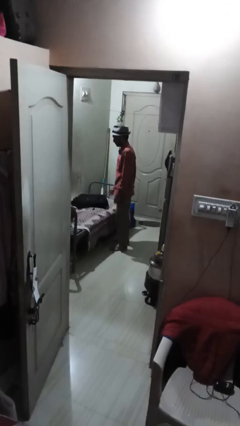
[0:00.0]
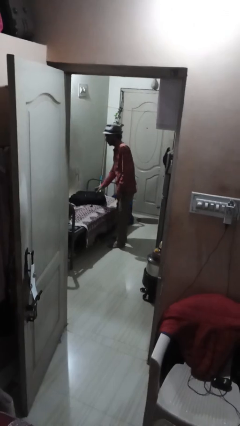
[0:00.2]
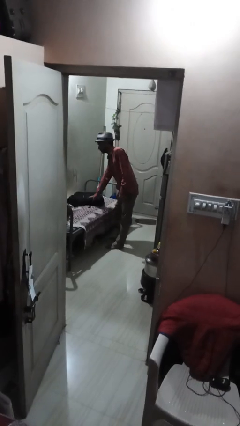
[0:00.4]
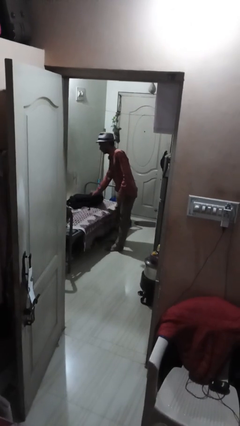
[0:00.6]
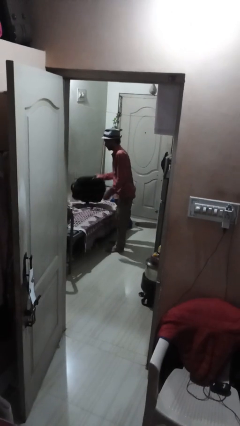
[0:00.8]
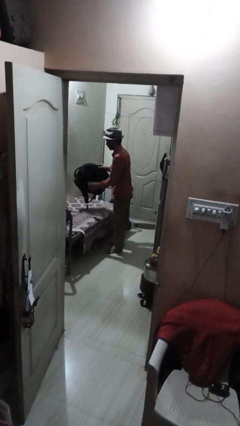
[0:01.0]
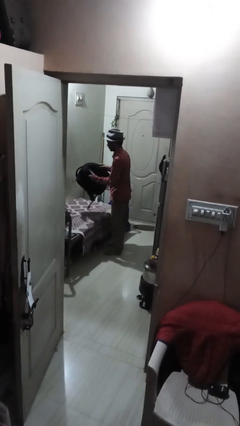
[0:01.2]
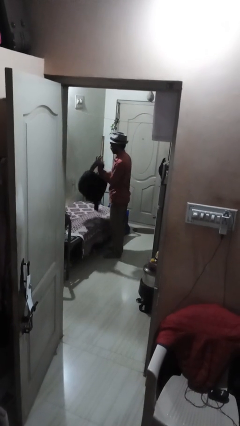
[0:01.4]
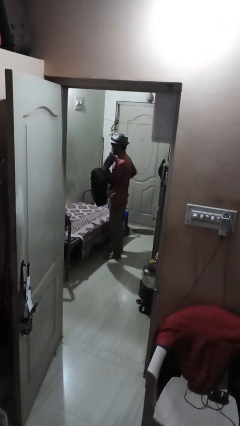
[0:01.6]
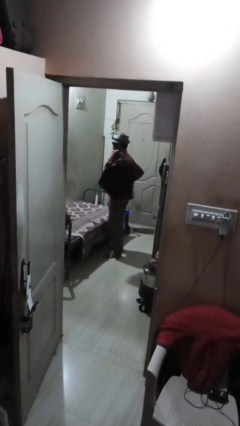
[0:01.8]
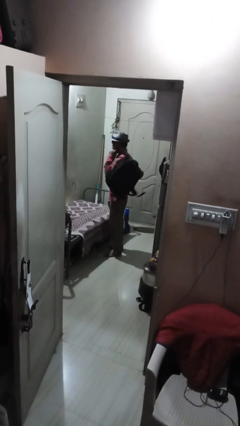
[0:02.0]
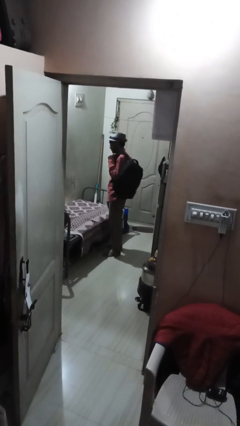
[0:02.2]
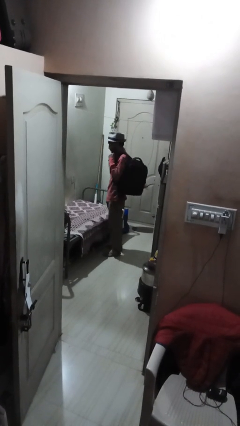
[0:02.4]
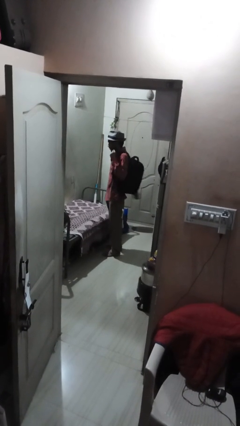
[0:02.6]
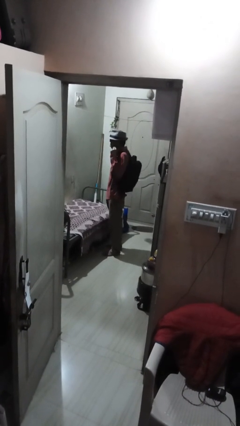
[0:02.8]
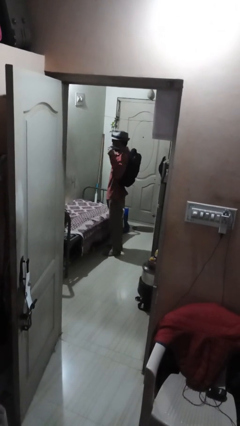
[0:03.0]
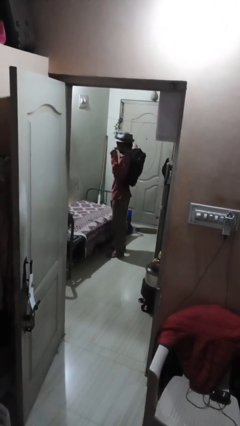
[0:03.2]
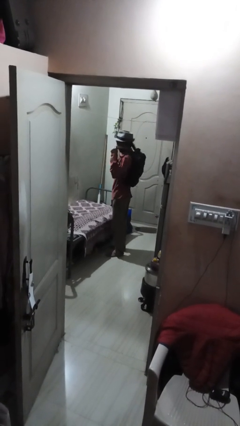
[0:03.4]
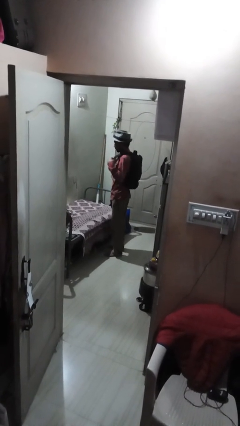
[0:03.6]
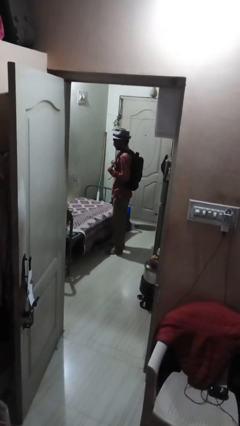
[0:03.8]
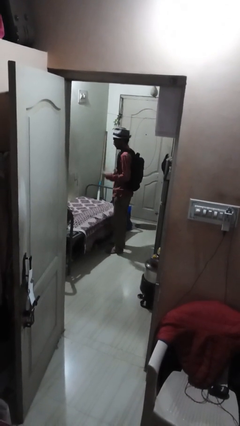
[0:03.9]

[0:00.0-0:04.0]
person puts on backpack

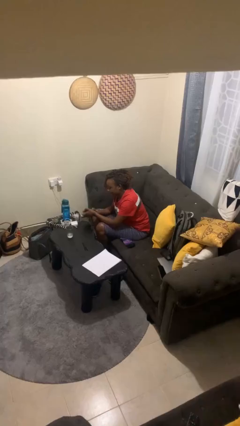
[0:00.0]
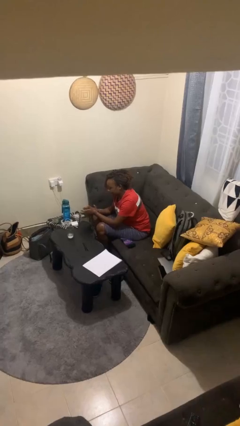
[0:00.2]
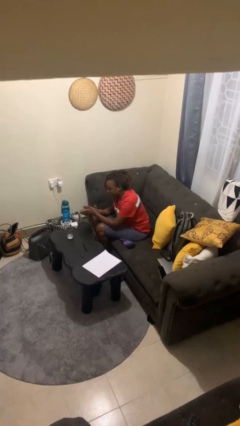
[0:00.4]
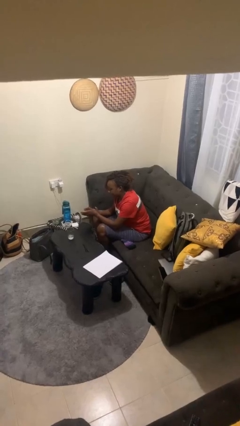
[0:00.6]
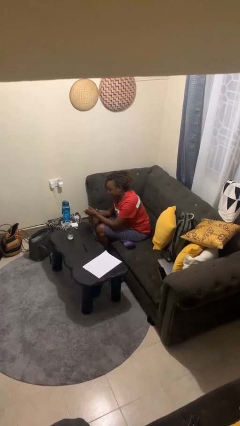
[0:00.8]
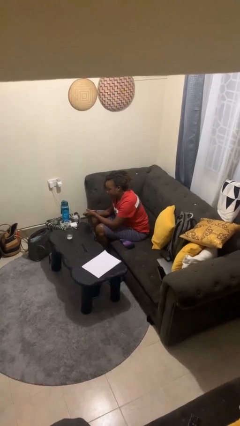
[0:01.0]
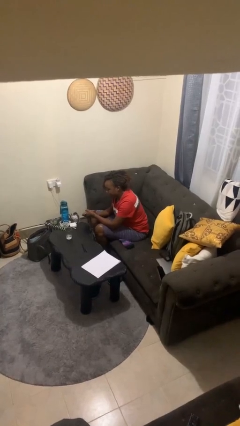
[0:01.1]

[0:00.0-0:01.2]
person claps hands

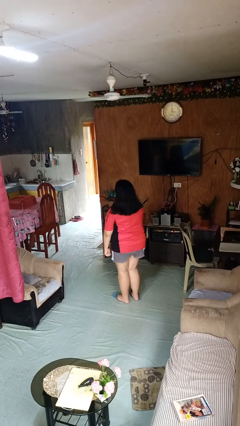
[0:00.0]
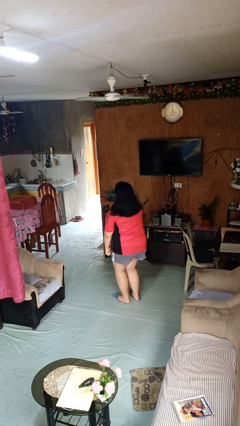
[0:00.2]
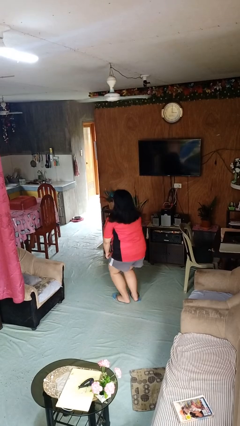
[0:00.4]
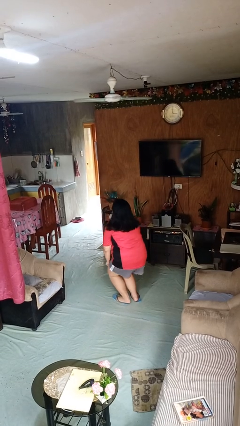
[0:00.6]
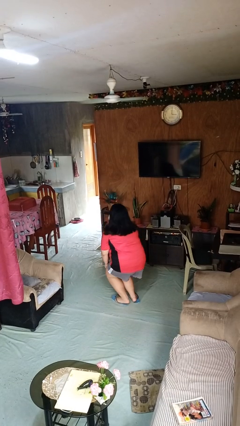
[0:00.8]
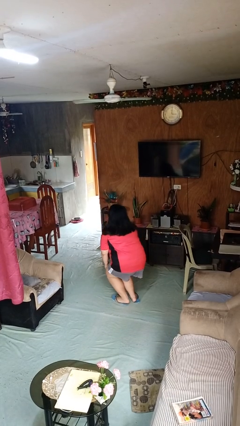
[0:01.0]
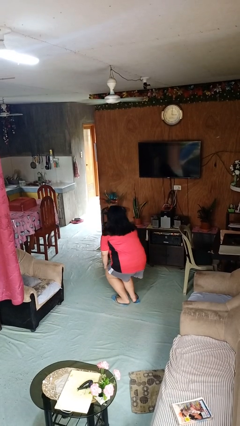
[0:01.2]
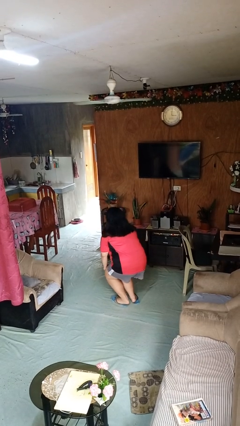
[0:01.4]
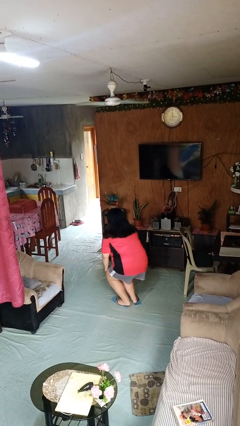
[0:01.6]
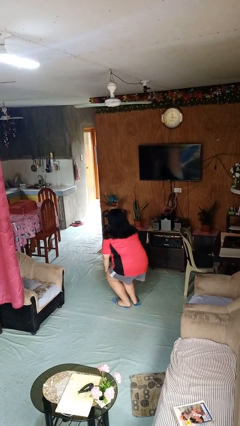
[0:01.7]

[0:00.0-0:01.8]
person squats

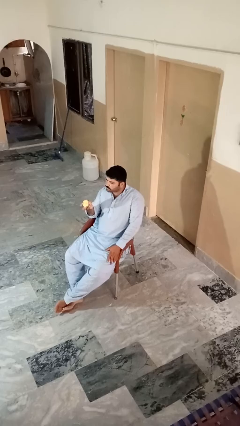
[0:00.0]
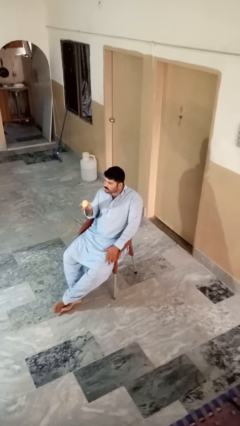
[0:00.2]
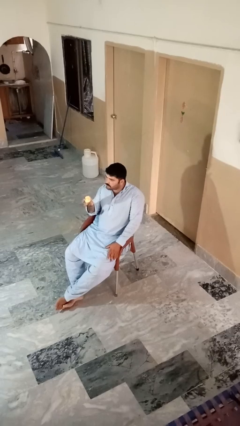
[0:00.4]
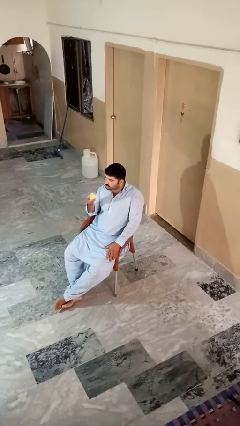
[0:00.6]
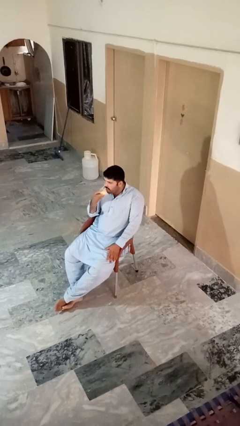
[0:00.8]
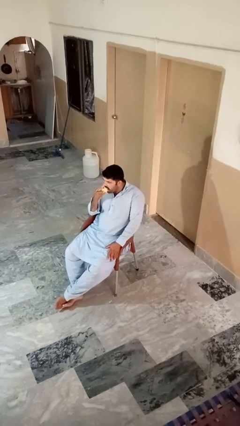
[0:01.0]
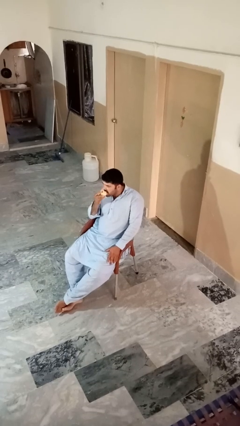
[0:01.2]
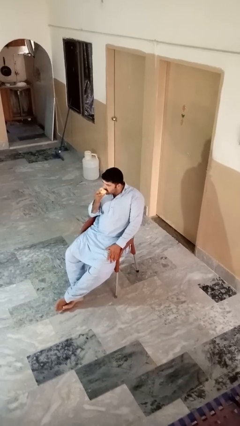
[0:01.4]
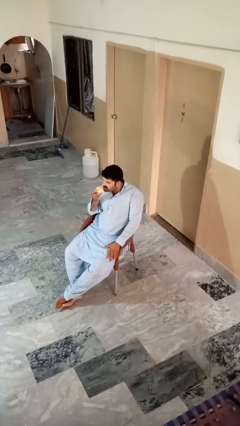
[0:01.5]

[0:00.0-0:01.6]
person eats apple

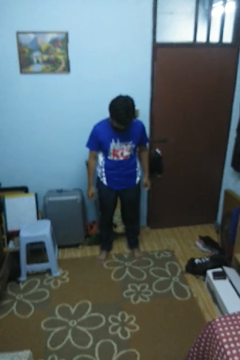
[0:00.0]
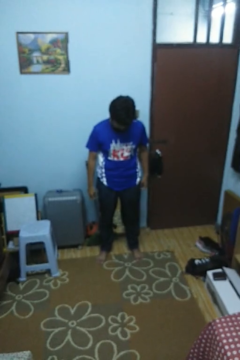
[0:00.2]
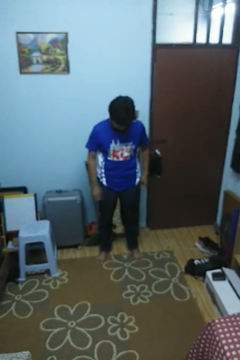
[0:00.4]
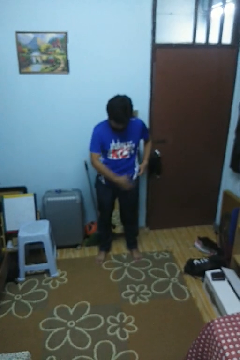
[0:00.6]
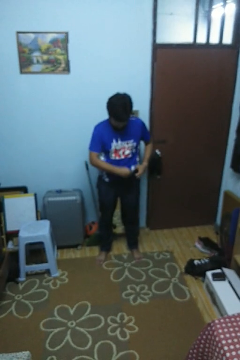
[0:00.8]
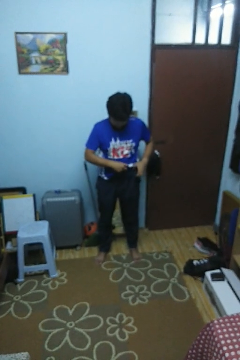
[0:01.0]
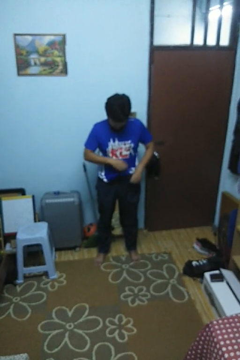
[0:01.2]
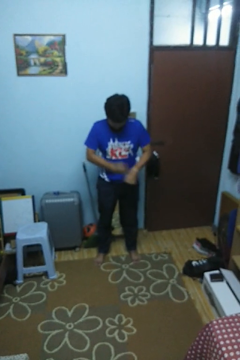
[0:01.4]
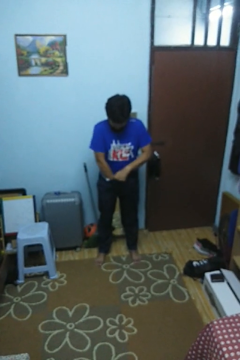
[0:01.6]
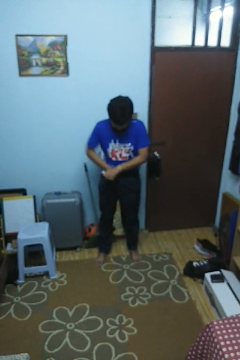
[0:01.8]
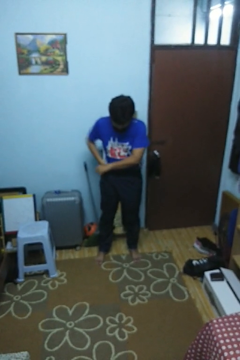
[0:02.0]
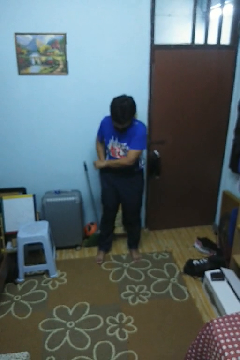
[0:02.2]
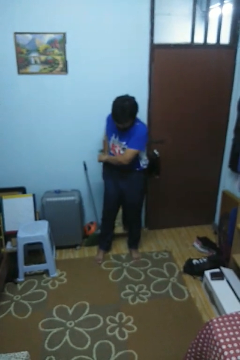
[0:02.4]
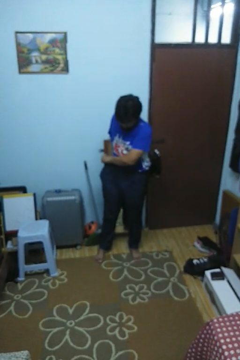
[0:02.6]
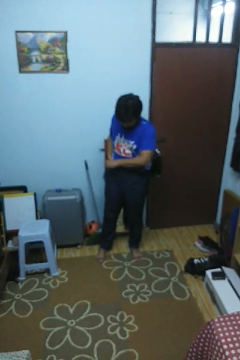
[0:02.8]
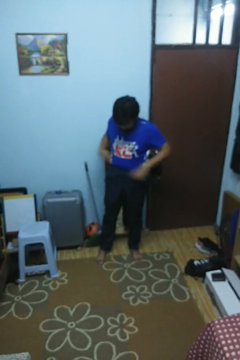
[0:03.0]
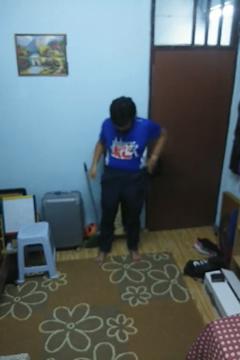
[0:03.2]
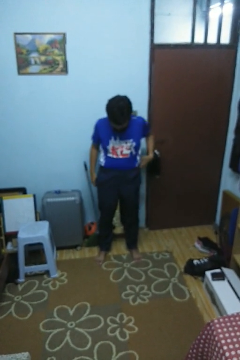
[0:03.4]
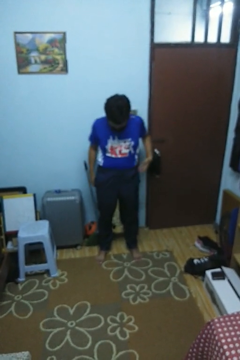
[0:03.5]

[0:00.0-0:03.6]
person tucks in shirt

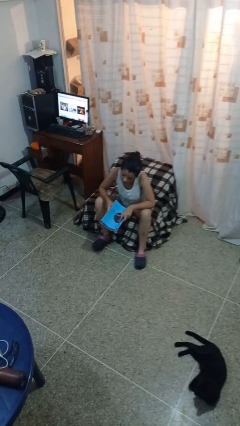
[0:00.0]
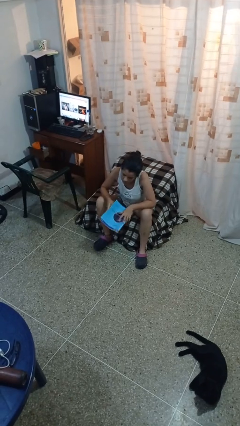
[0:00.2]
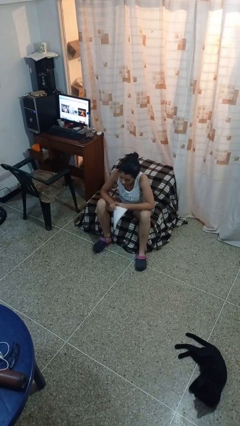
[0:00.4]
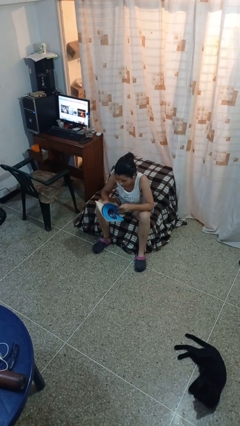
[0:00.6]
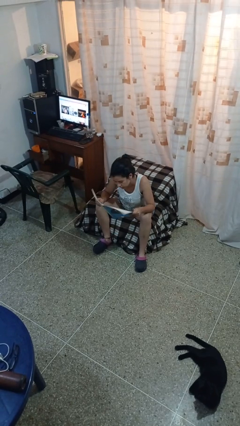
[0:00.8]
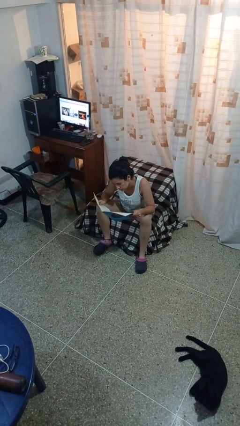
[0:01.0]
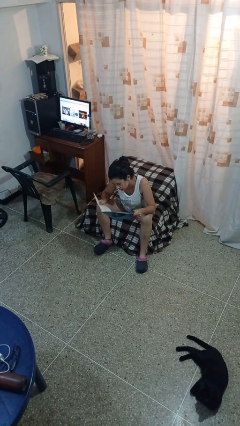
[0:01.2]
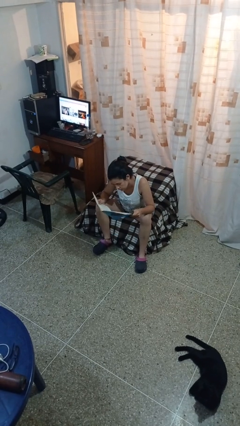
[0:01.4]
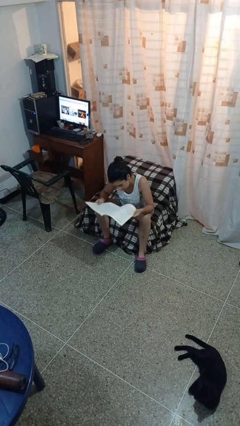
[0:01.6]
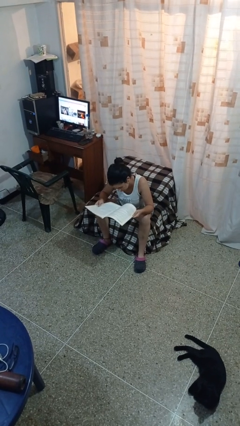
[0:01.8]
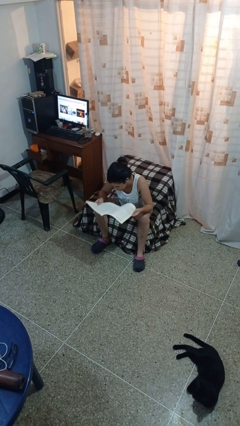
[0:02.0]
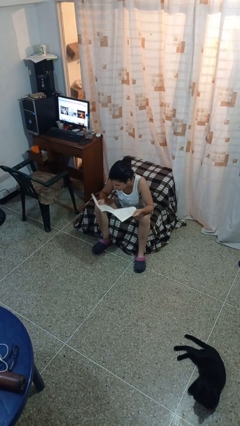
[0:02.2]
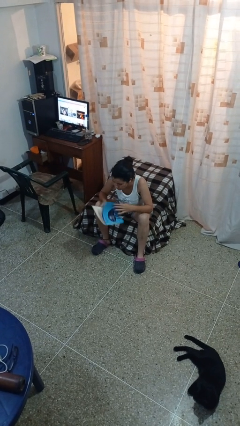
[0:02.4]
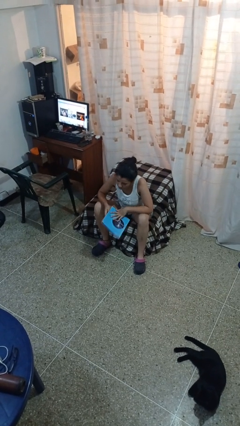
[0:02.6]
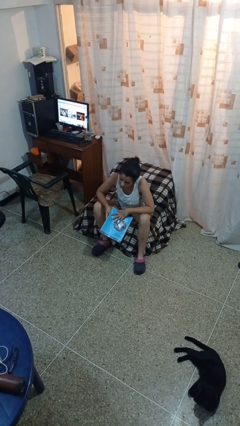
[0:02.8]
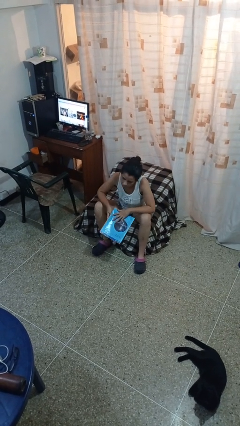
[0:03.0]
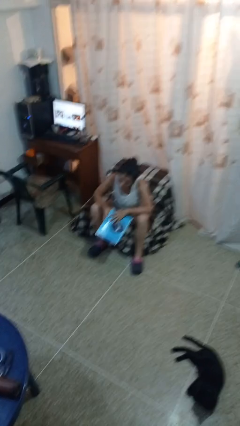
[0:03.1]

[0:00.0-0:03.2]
person reads magazine

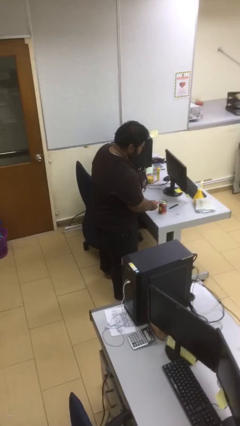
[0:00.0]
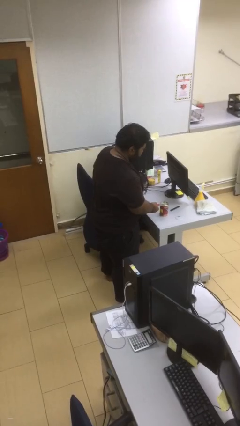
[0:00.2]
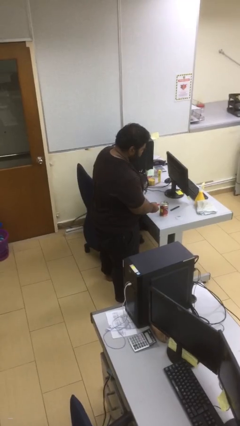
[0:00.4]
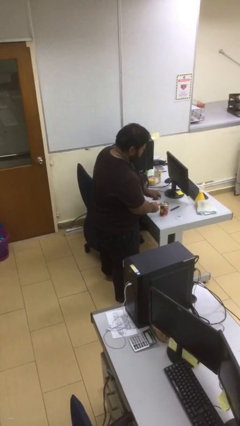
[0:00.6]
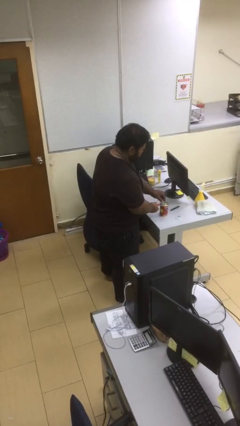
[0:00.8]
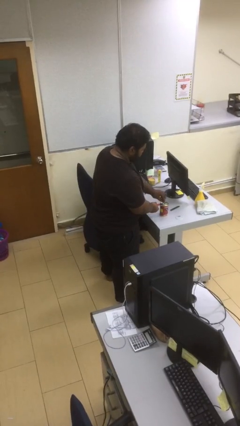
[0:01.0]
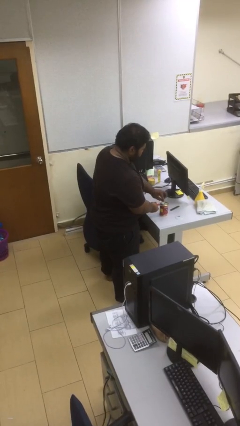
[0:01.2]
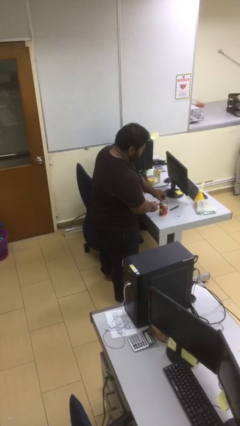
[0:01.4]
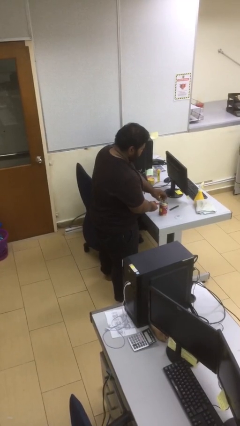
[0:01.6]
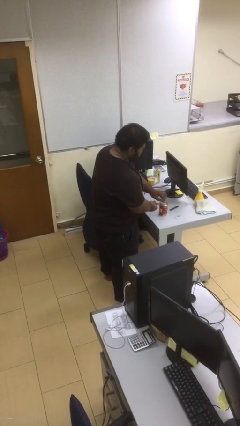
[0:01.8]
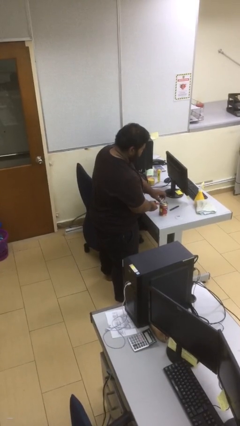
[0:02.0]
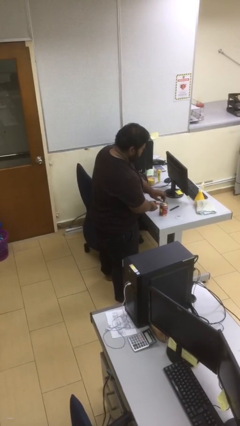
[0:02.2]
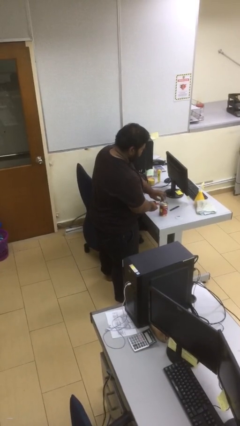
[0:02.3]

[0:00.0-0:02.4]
person opens can with can opener
